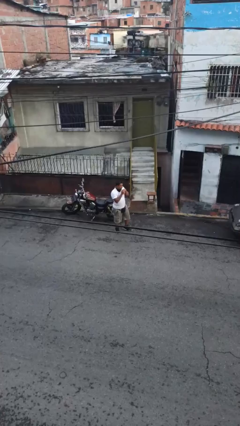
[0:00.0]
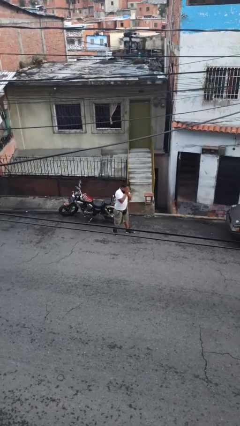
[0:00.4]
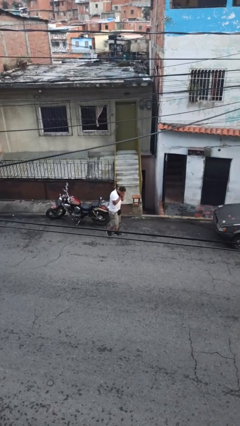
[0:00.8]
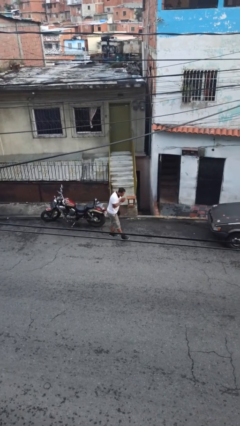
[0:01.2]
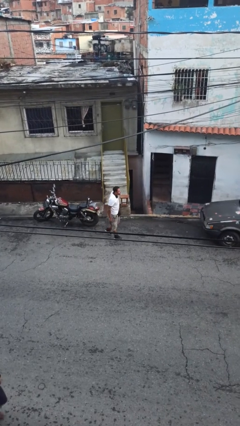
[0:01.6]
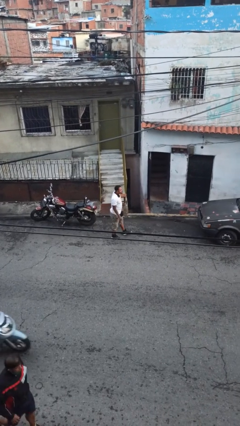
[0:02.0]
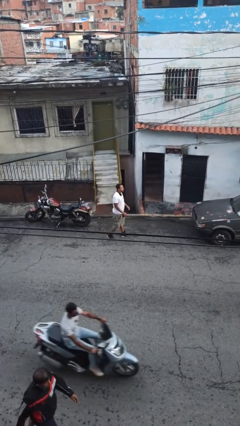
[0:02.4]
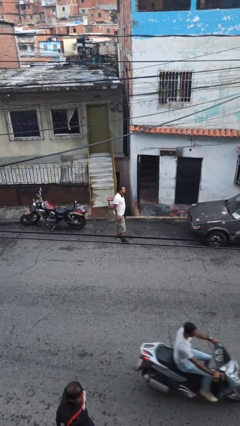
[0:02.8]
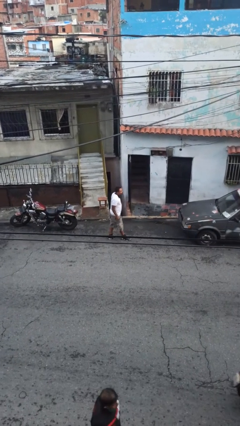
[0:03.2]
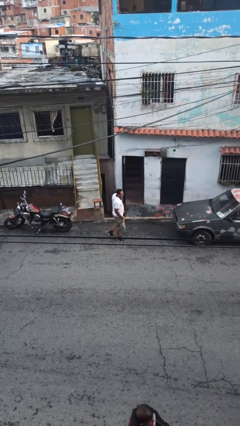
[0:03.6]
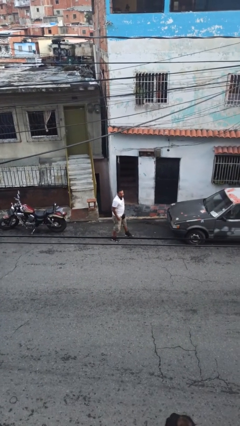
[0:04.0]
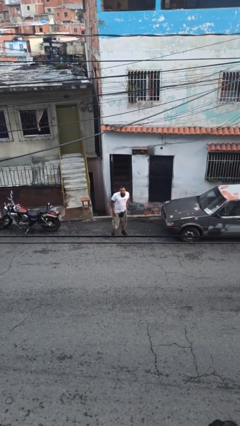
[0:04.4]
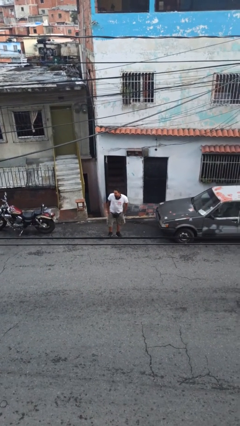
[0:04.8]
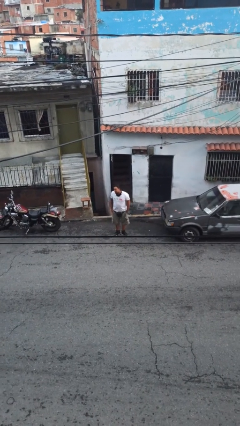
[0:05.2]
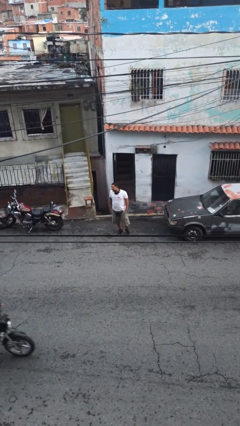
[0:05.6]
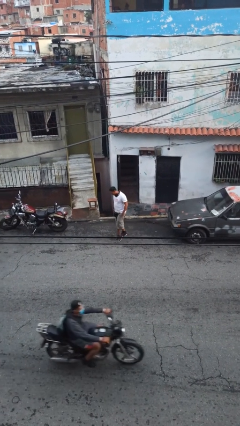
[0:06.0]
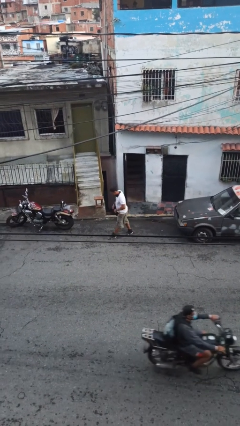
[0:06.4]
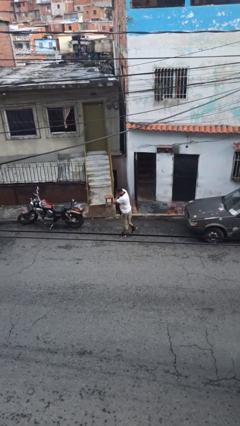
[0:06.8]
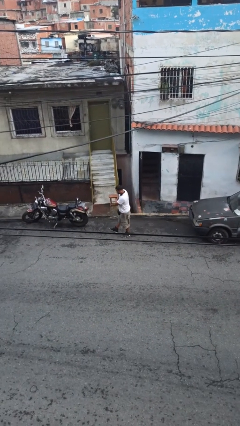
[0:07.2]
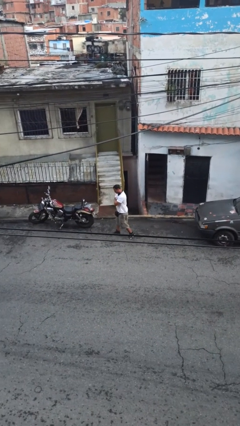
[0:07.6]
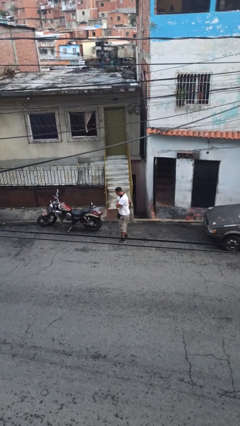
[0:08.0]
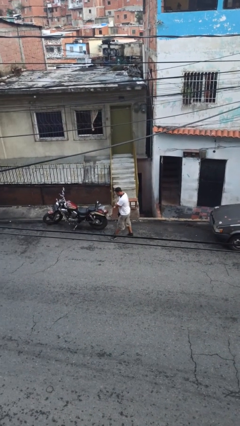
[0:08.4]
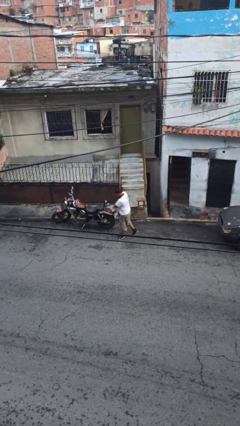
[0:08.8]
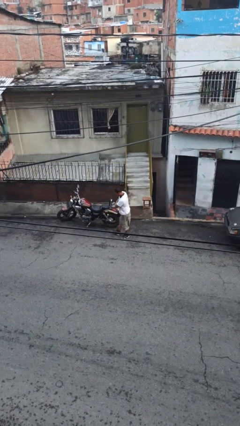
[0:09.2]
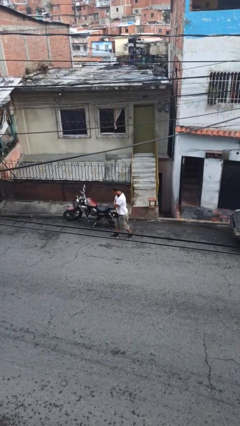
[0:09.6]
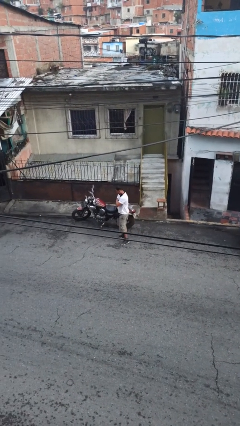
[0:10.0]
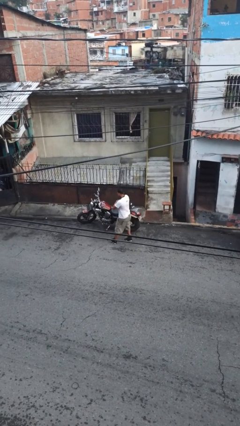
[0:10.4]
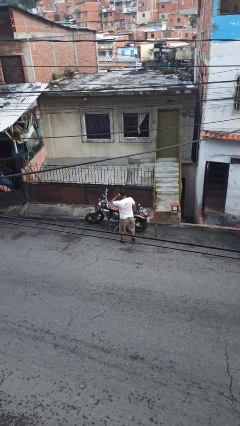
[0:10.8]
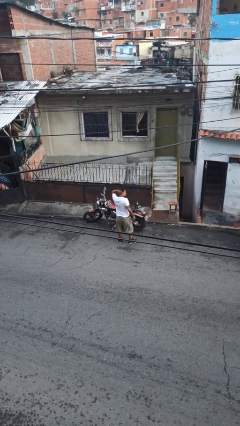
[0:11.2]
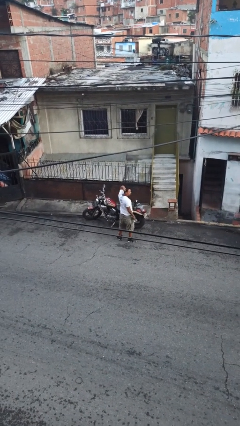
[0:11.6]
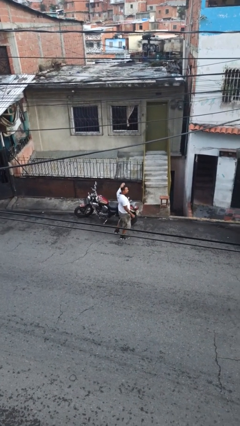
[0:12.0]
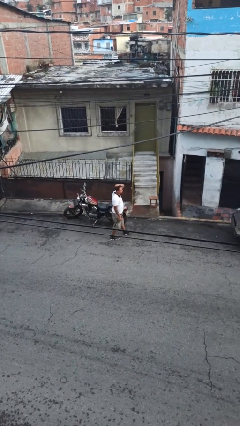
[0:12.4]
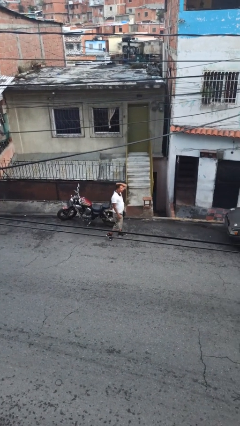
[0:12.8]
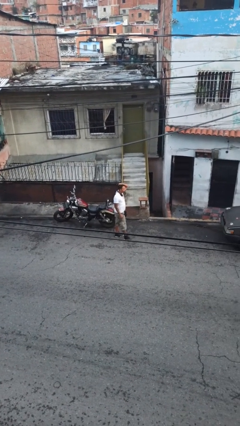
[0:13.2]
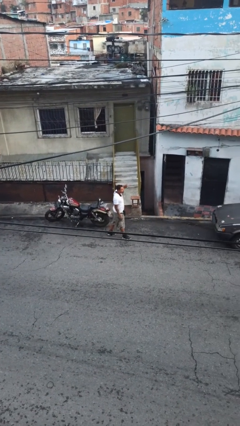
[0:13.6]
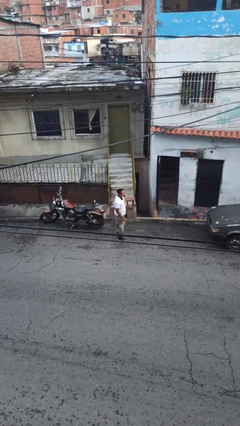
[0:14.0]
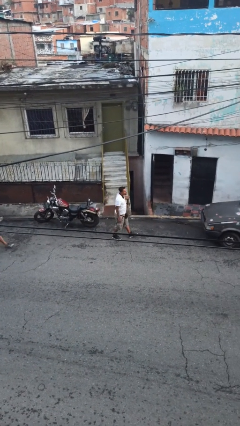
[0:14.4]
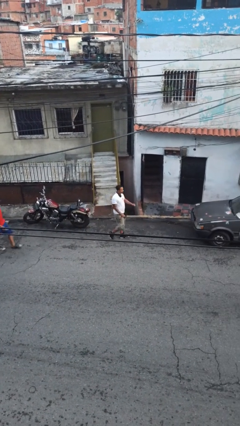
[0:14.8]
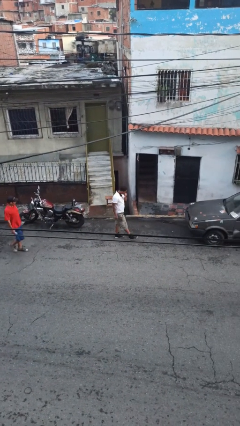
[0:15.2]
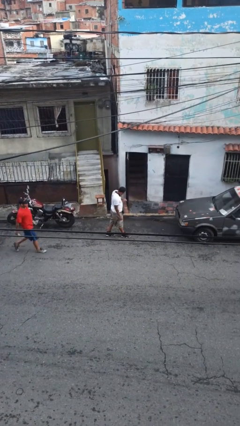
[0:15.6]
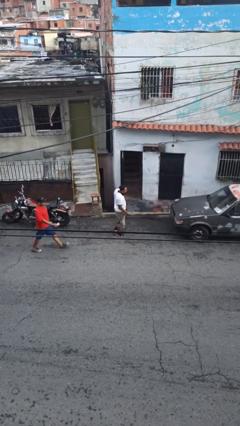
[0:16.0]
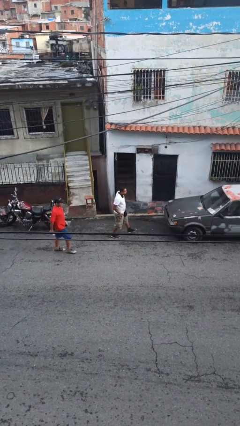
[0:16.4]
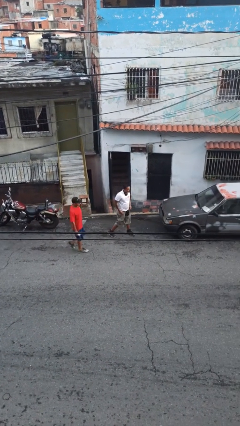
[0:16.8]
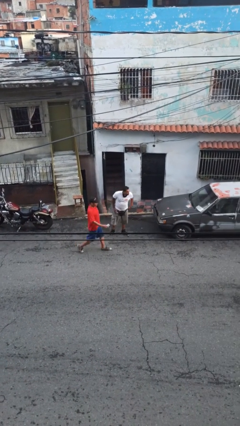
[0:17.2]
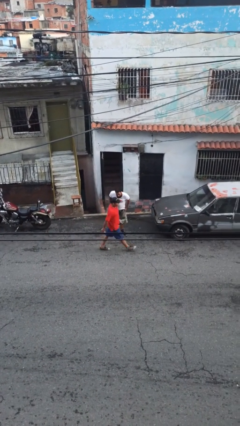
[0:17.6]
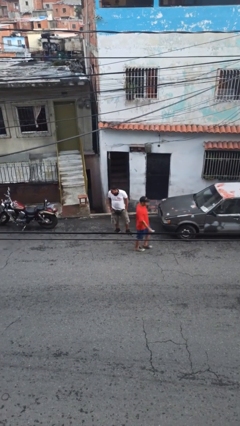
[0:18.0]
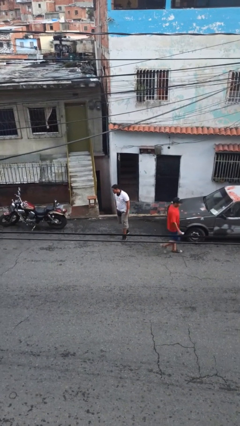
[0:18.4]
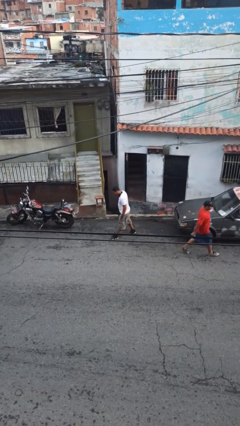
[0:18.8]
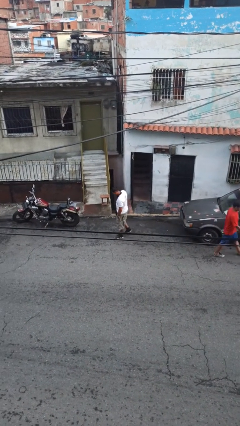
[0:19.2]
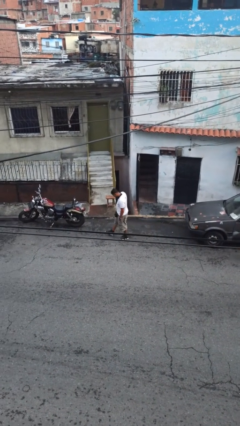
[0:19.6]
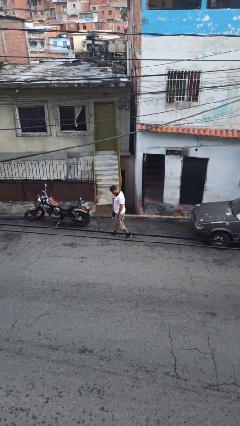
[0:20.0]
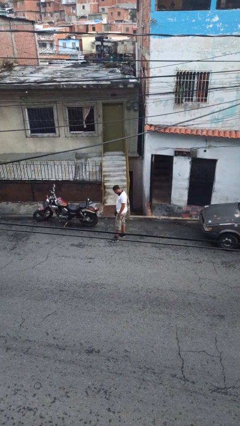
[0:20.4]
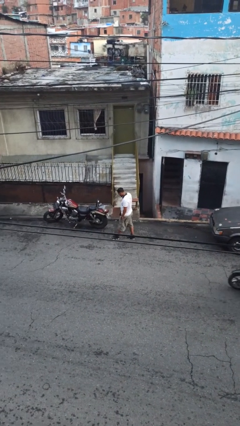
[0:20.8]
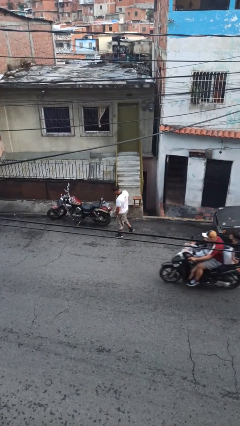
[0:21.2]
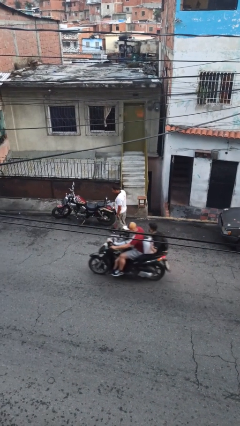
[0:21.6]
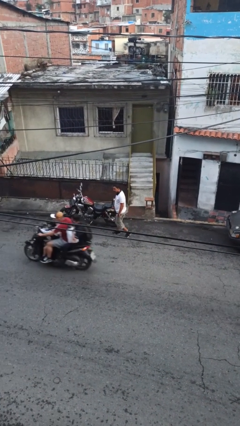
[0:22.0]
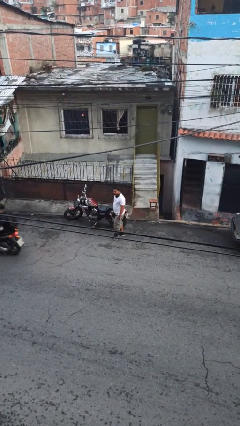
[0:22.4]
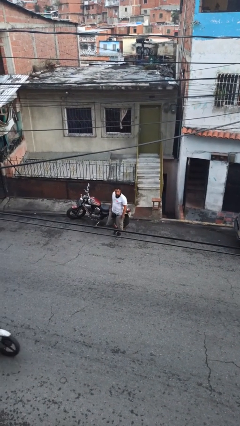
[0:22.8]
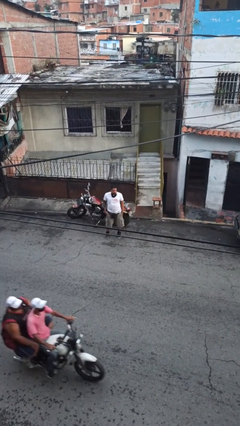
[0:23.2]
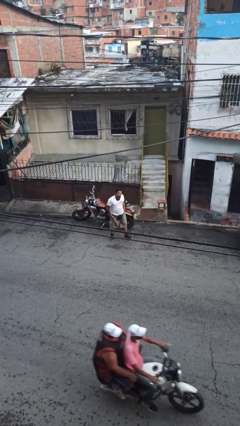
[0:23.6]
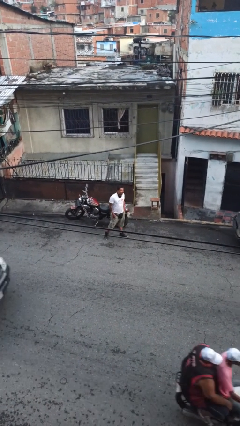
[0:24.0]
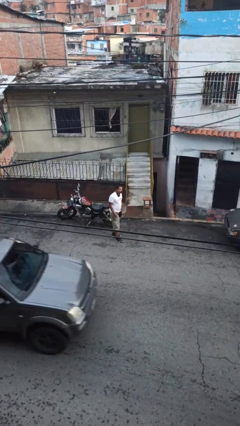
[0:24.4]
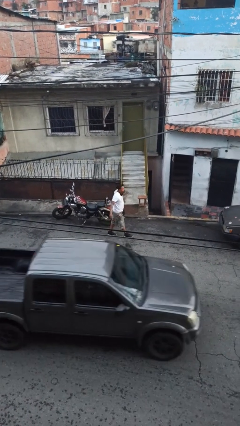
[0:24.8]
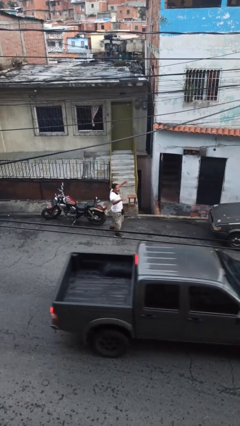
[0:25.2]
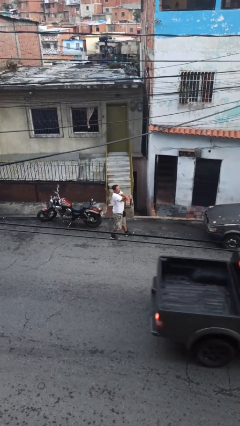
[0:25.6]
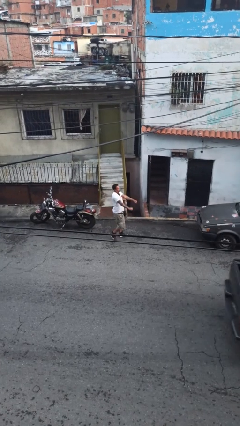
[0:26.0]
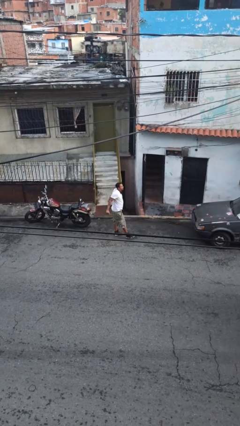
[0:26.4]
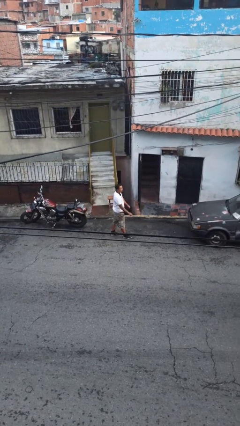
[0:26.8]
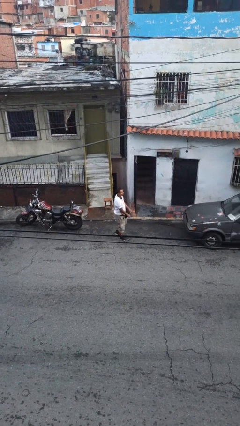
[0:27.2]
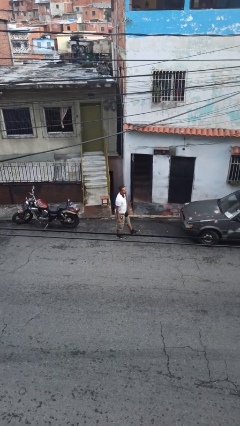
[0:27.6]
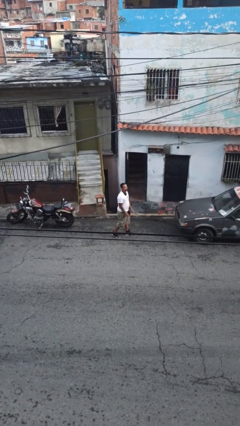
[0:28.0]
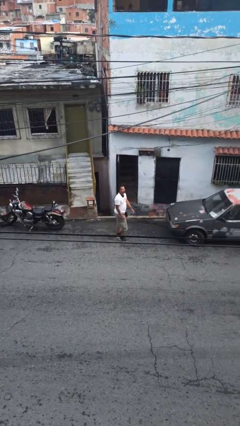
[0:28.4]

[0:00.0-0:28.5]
person walks

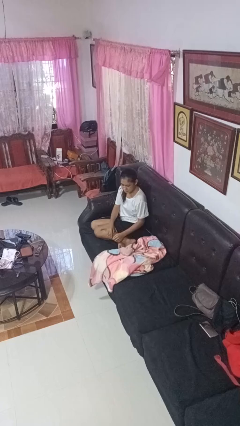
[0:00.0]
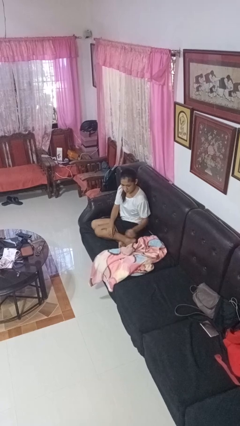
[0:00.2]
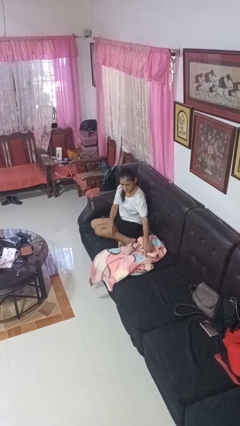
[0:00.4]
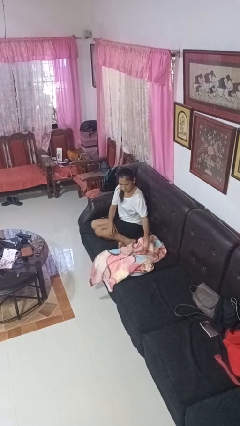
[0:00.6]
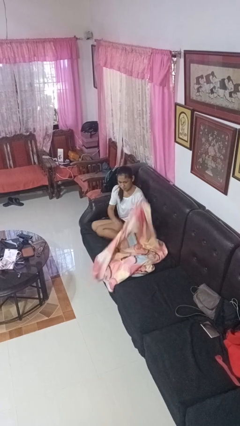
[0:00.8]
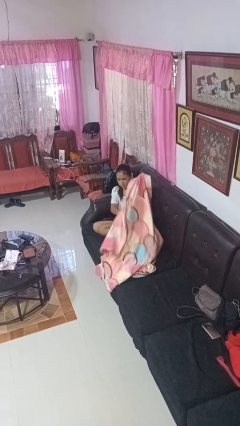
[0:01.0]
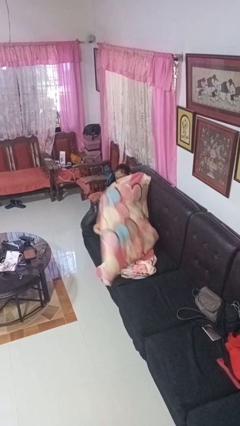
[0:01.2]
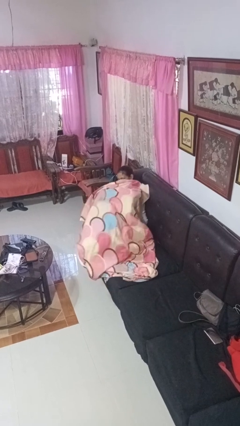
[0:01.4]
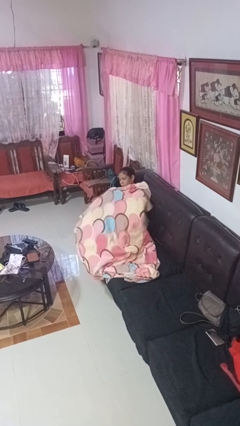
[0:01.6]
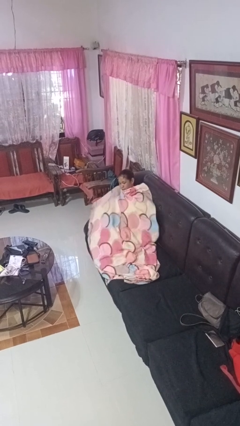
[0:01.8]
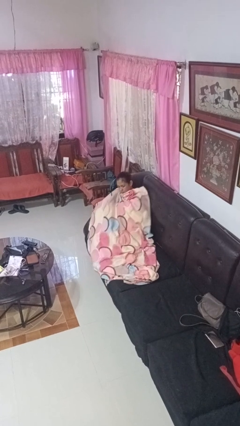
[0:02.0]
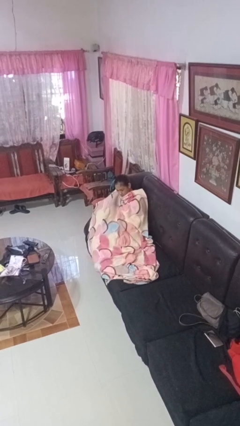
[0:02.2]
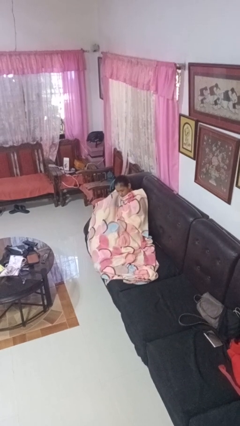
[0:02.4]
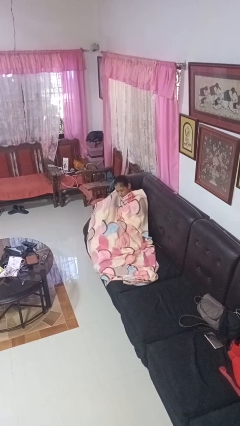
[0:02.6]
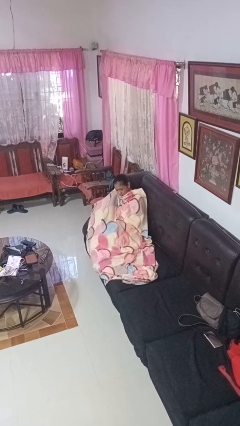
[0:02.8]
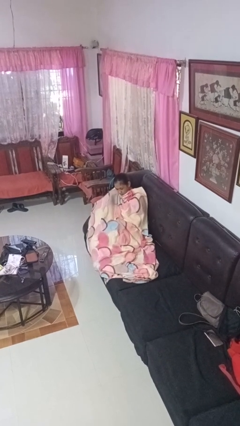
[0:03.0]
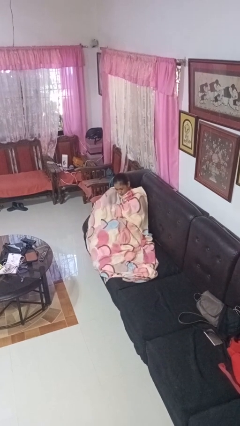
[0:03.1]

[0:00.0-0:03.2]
person covers with blanket

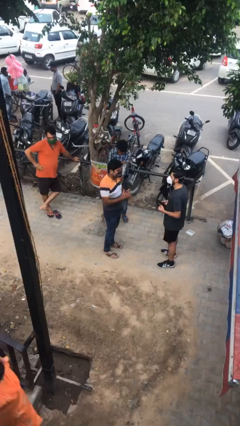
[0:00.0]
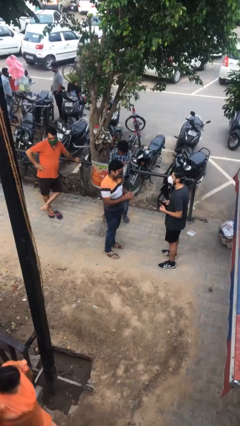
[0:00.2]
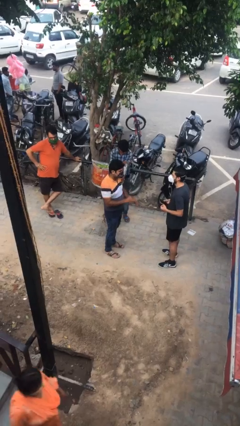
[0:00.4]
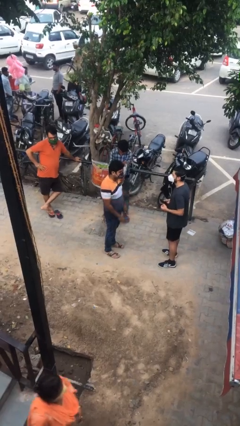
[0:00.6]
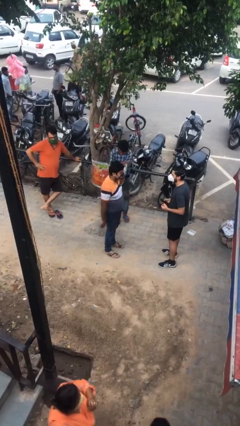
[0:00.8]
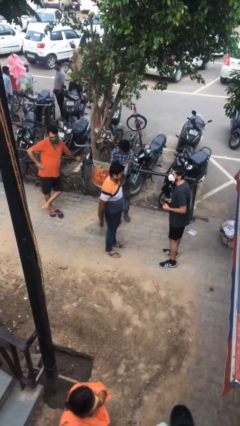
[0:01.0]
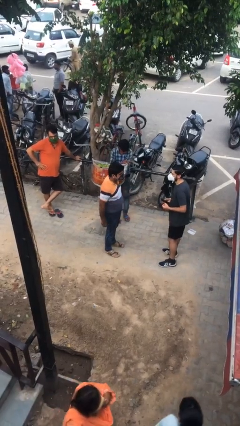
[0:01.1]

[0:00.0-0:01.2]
person talks to person
